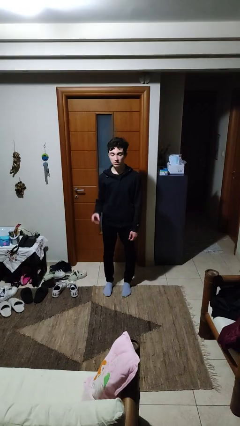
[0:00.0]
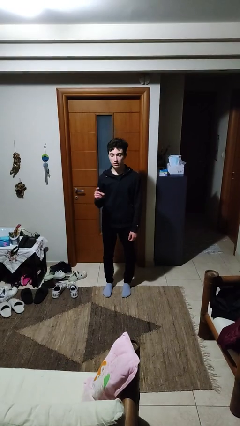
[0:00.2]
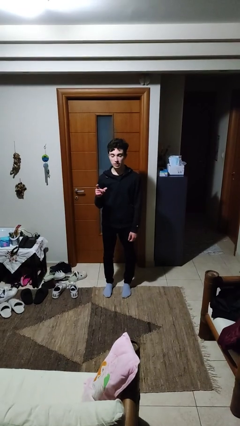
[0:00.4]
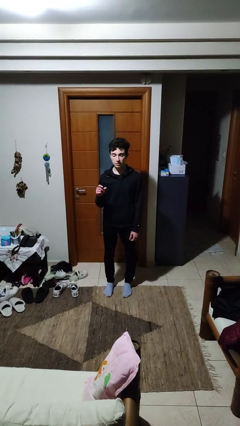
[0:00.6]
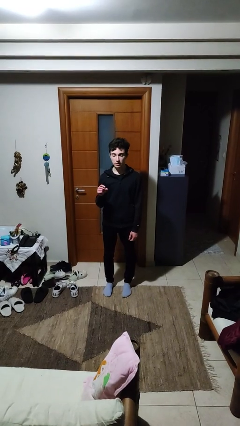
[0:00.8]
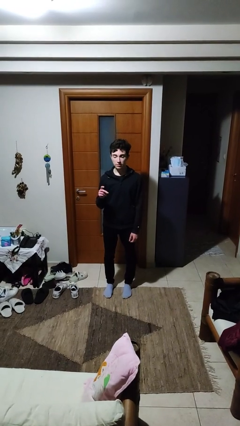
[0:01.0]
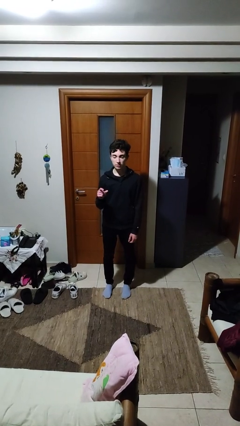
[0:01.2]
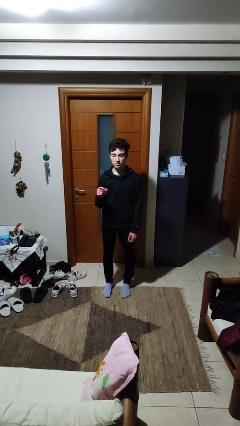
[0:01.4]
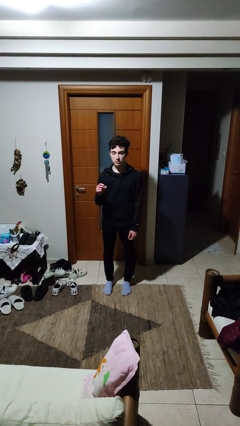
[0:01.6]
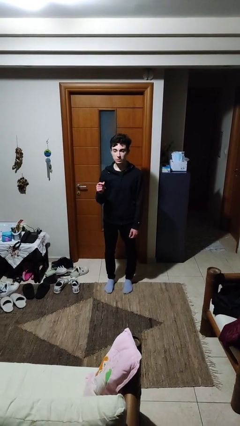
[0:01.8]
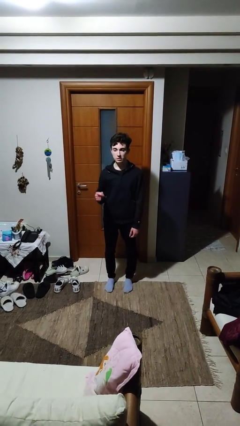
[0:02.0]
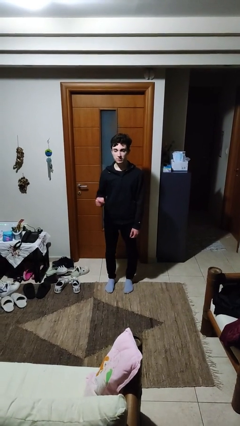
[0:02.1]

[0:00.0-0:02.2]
person snaps fingers

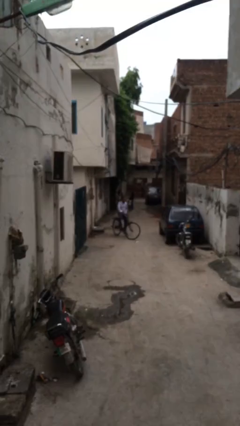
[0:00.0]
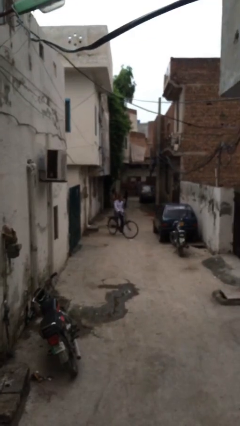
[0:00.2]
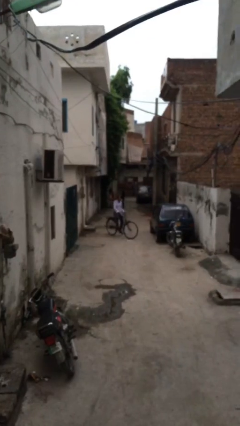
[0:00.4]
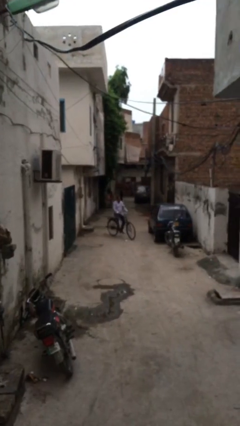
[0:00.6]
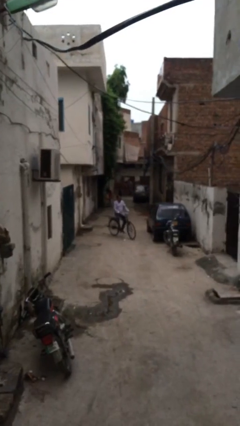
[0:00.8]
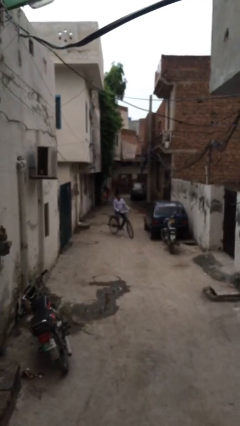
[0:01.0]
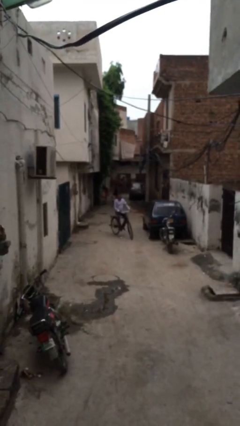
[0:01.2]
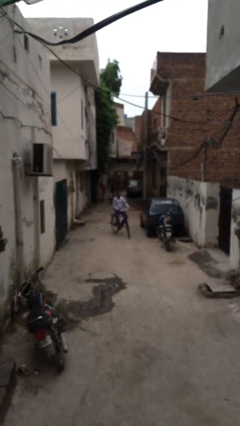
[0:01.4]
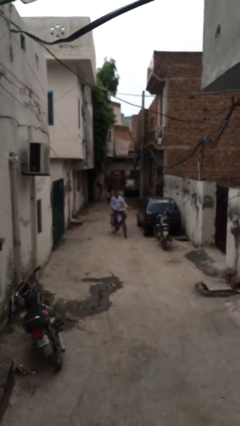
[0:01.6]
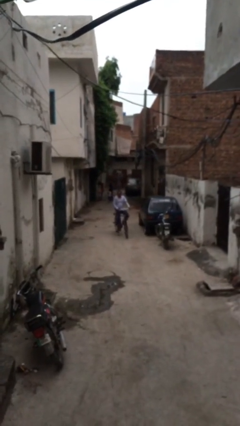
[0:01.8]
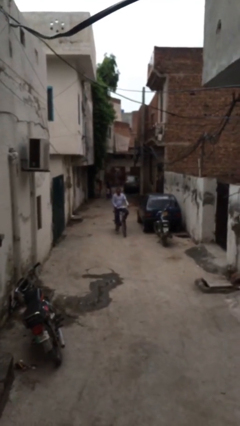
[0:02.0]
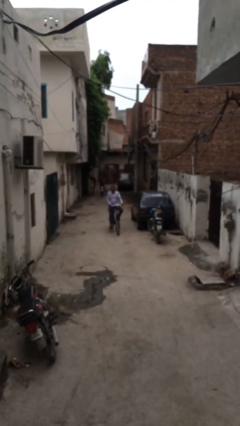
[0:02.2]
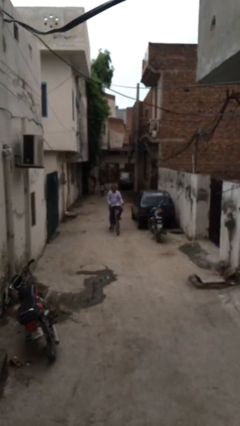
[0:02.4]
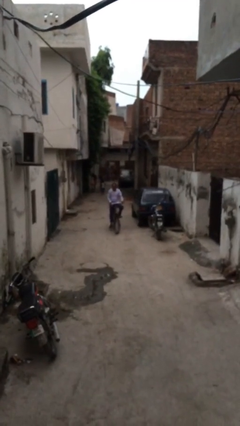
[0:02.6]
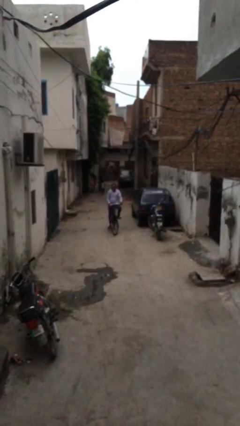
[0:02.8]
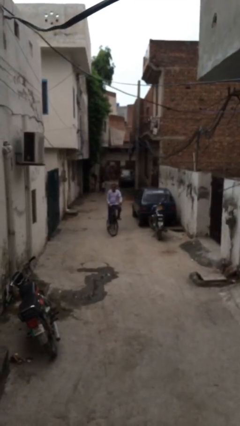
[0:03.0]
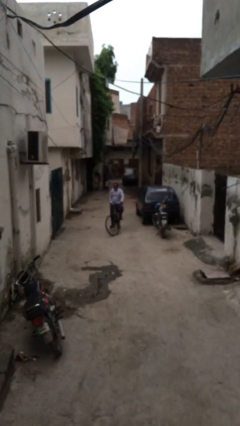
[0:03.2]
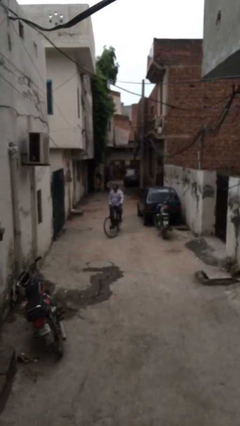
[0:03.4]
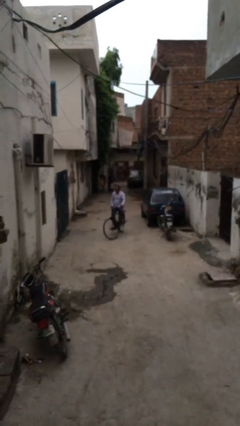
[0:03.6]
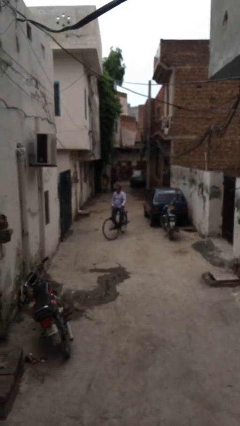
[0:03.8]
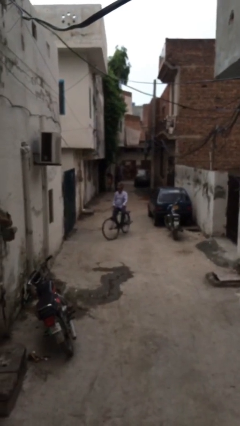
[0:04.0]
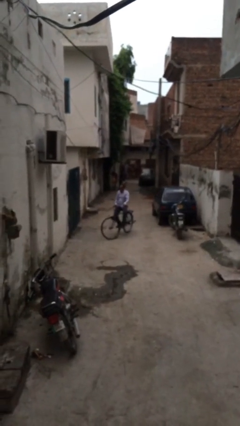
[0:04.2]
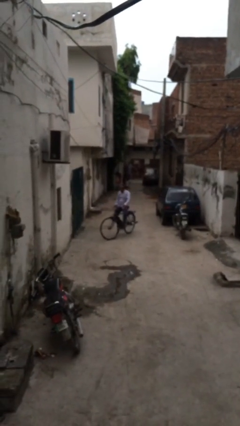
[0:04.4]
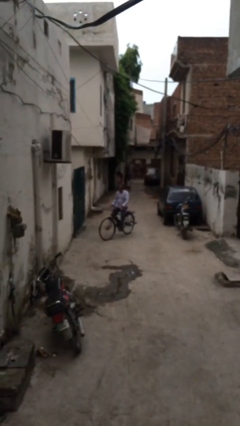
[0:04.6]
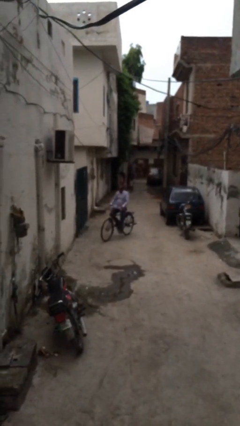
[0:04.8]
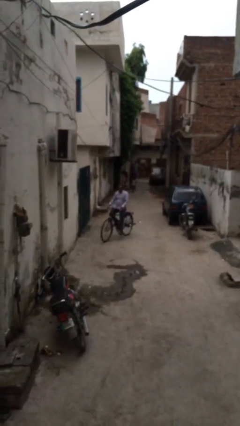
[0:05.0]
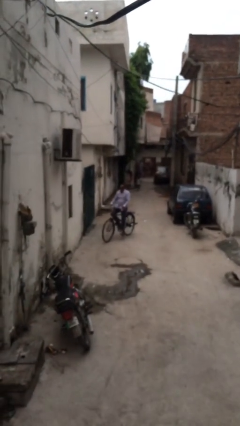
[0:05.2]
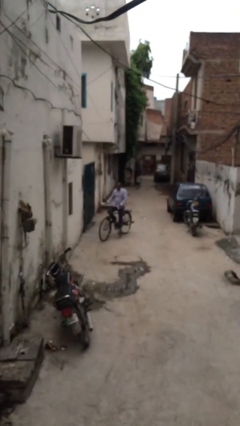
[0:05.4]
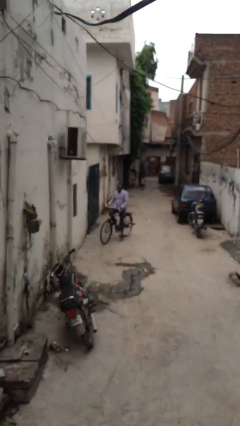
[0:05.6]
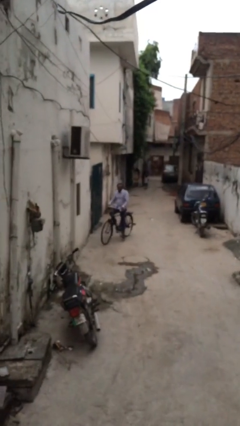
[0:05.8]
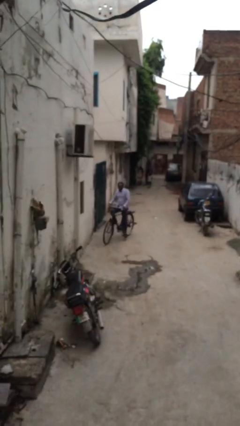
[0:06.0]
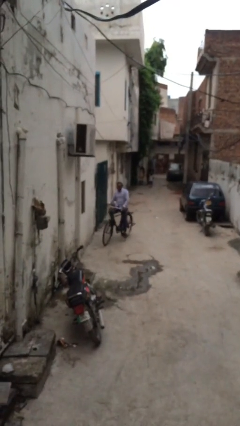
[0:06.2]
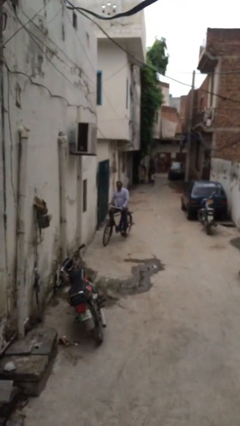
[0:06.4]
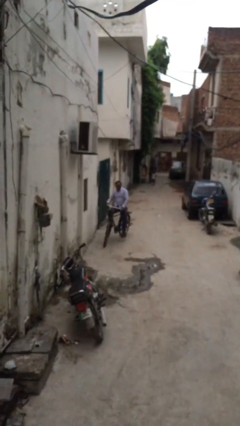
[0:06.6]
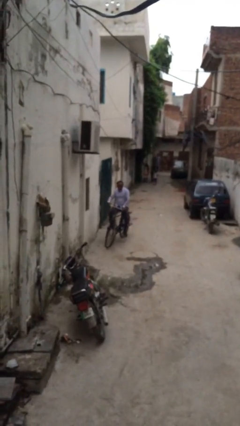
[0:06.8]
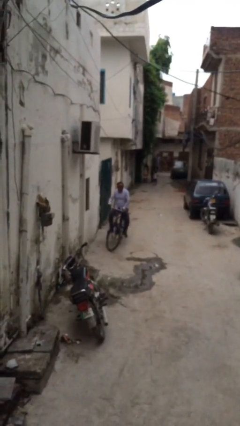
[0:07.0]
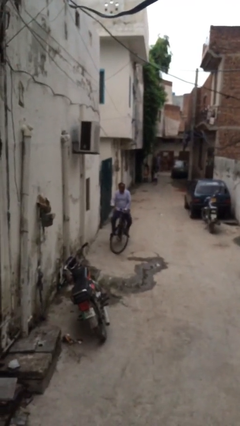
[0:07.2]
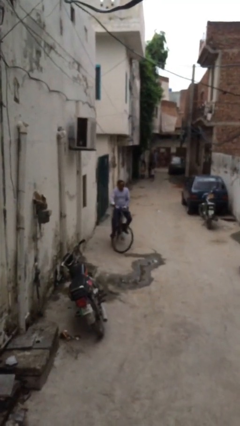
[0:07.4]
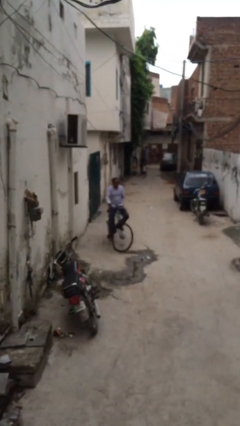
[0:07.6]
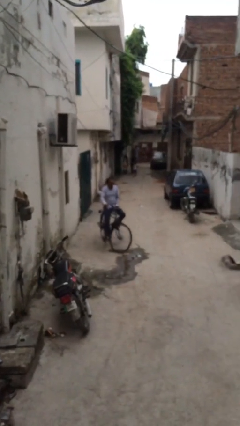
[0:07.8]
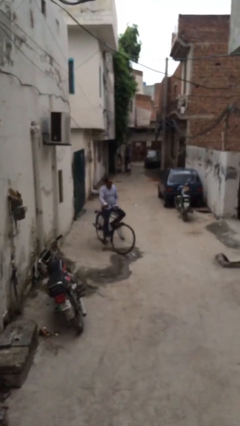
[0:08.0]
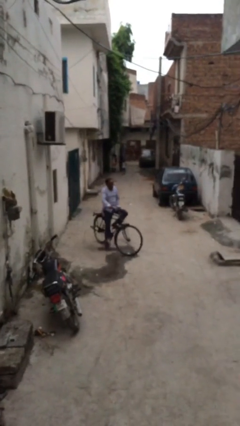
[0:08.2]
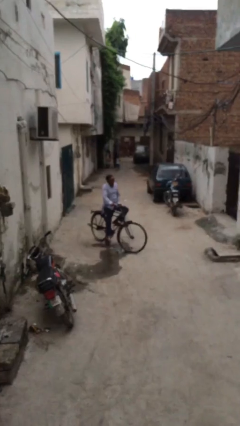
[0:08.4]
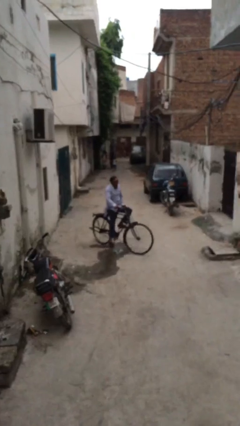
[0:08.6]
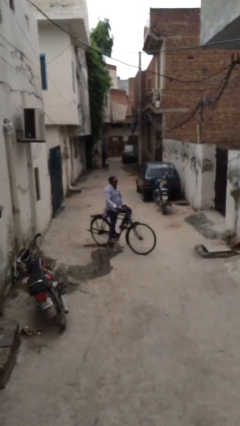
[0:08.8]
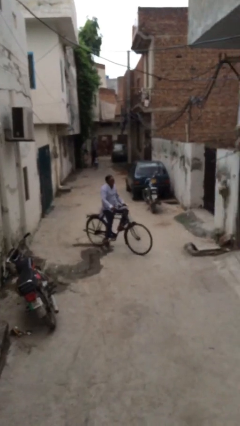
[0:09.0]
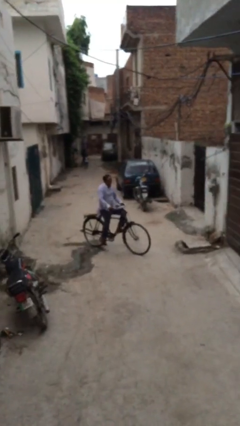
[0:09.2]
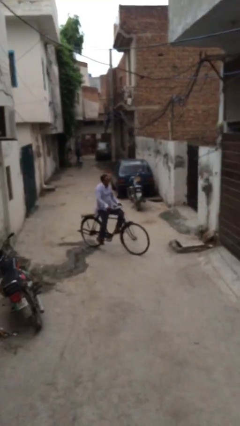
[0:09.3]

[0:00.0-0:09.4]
person rides bicycle

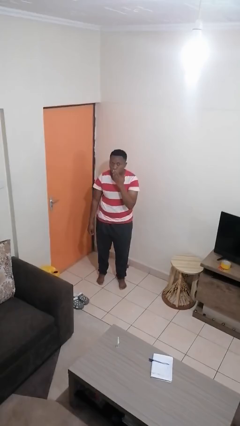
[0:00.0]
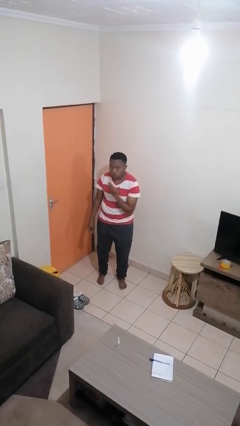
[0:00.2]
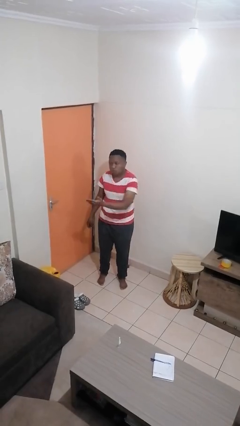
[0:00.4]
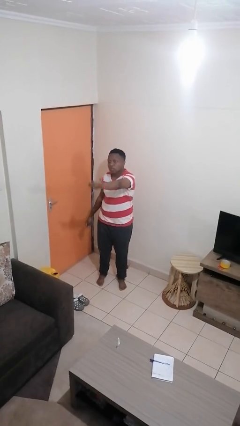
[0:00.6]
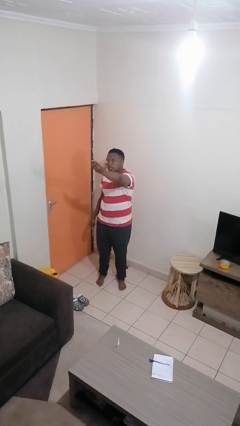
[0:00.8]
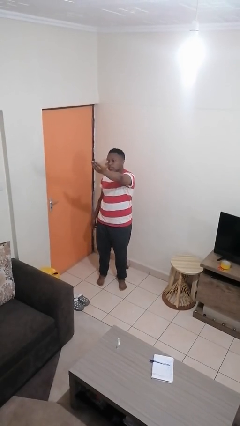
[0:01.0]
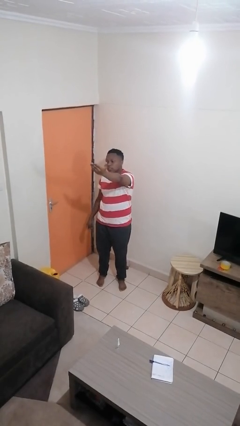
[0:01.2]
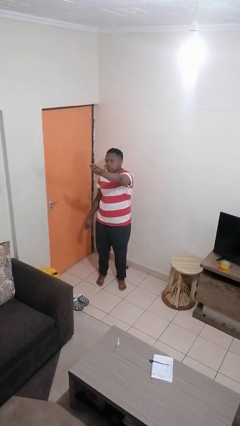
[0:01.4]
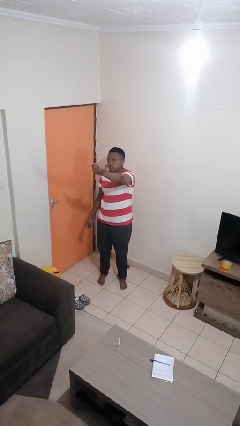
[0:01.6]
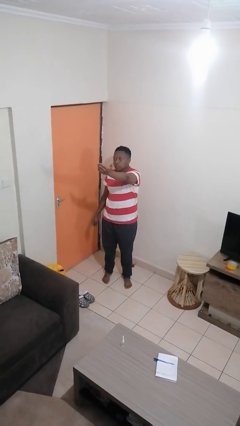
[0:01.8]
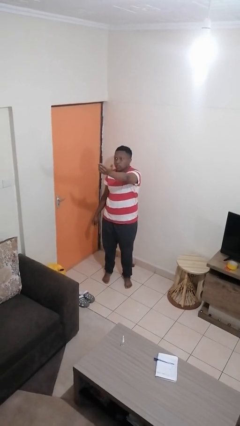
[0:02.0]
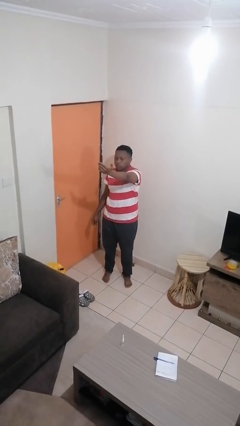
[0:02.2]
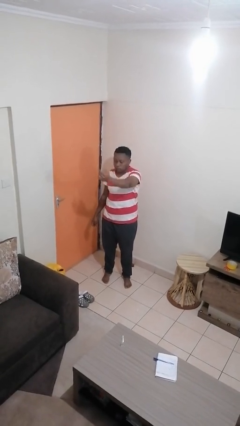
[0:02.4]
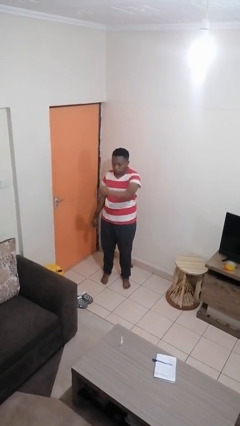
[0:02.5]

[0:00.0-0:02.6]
person gestures blow kiss

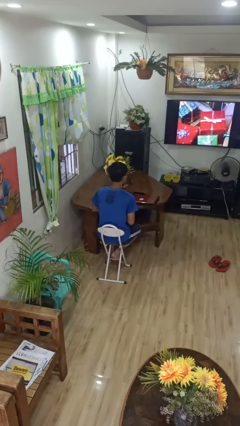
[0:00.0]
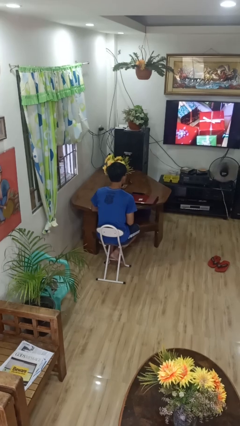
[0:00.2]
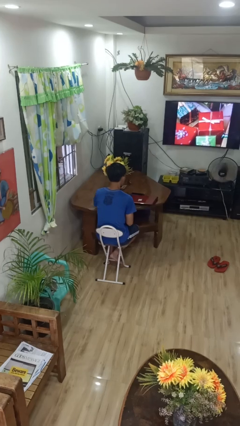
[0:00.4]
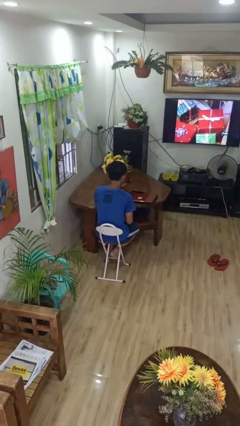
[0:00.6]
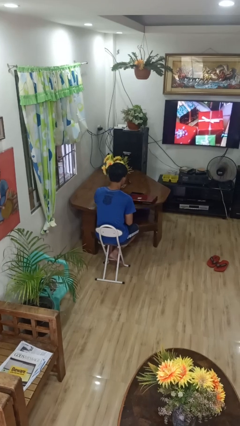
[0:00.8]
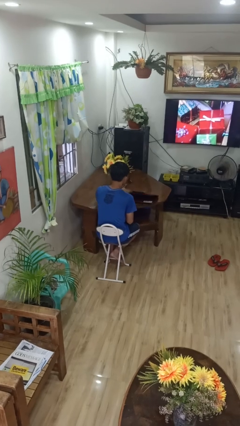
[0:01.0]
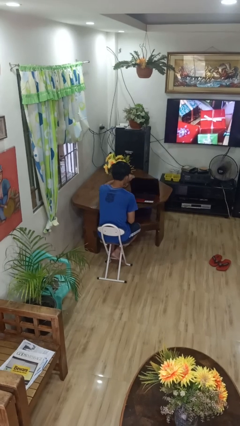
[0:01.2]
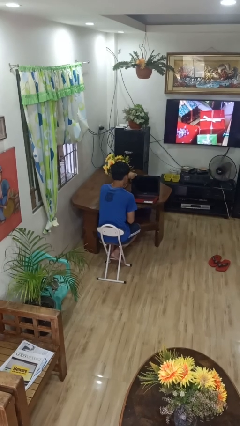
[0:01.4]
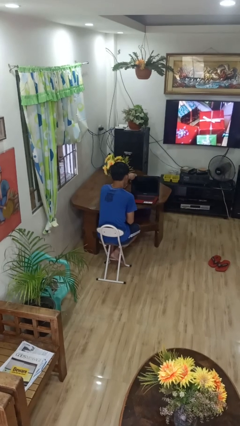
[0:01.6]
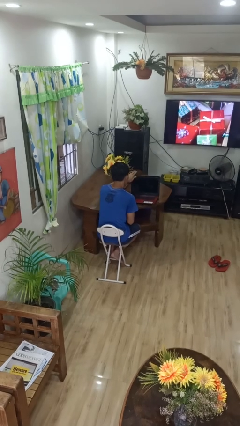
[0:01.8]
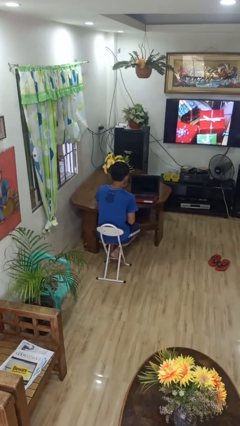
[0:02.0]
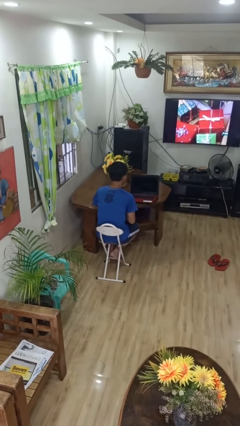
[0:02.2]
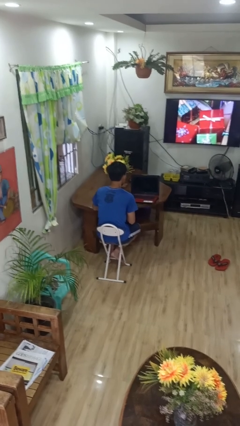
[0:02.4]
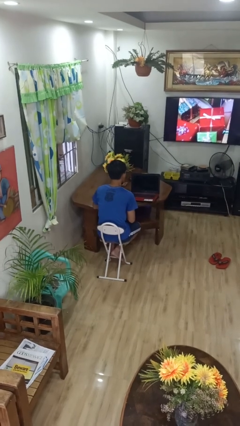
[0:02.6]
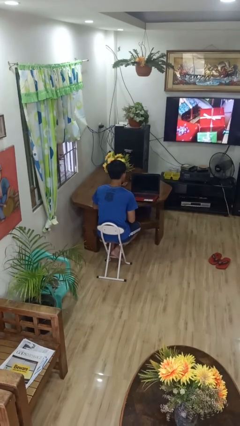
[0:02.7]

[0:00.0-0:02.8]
person opens laptop

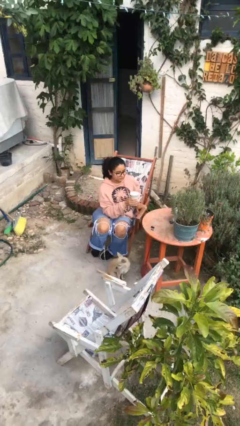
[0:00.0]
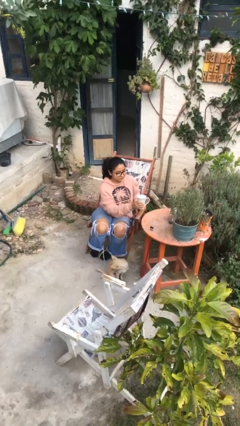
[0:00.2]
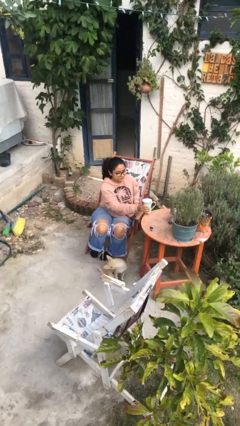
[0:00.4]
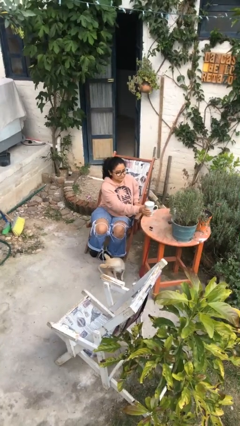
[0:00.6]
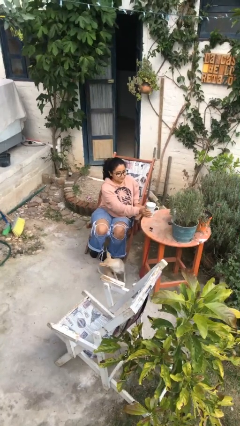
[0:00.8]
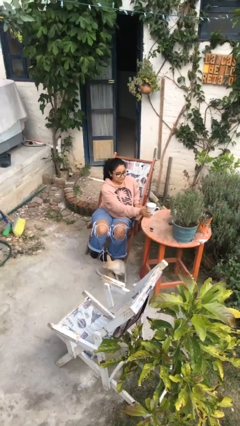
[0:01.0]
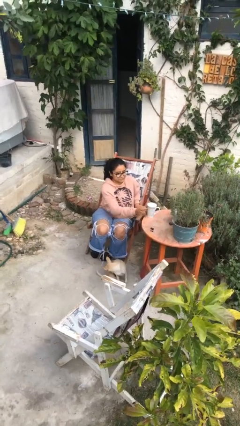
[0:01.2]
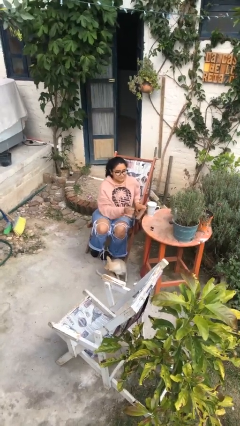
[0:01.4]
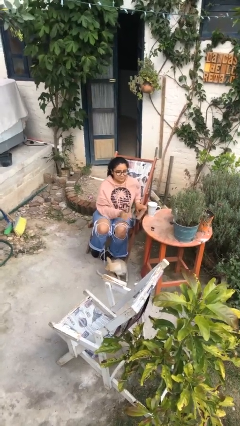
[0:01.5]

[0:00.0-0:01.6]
person puts down object on table
